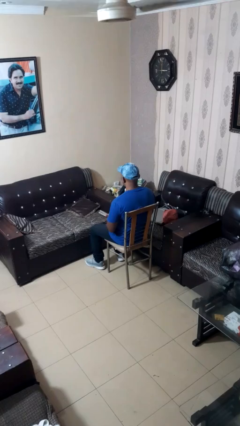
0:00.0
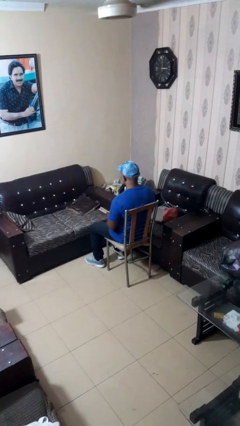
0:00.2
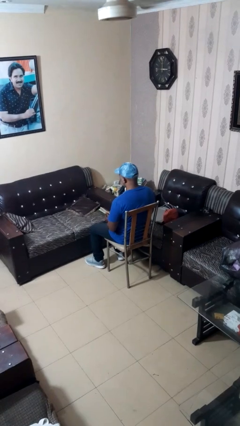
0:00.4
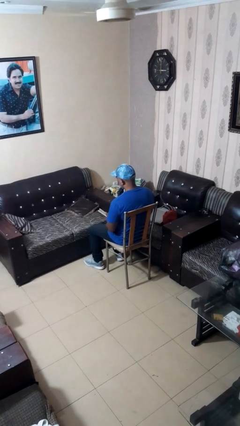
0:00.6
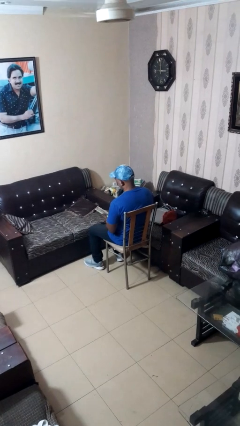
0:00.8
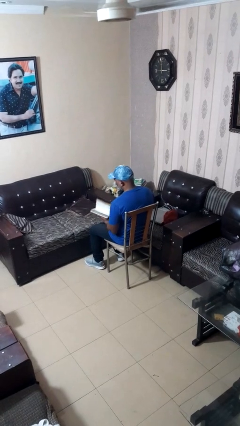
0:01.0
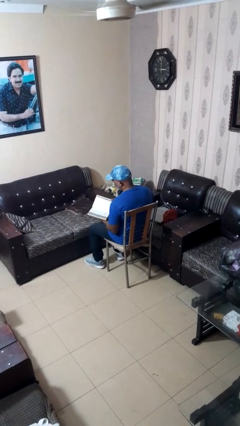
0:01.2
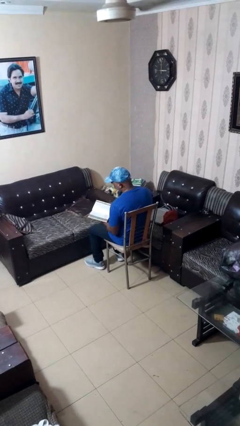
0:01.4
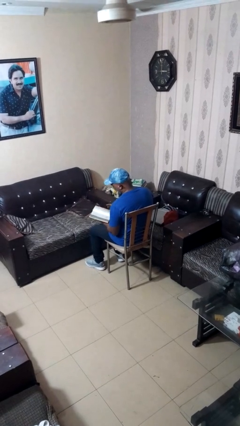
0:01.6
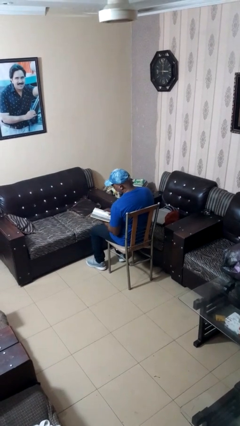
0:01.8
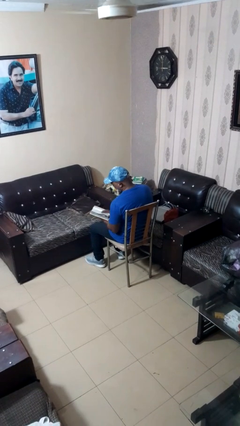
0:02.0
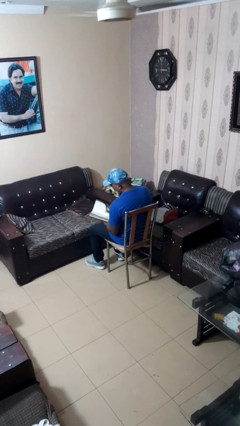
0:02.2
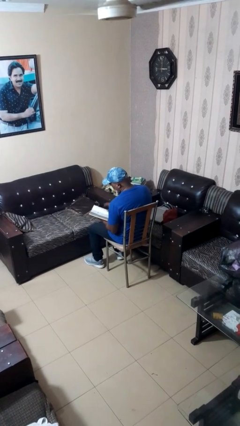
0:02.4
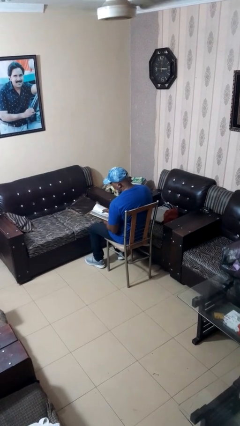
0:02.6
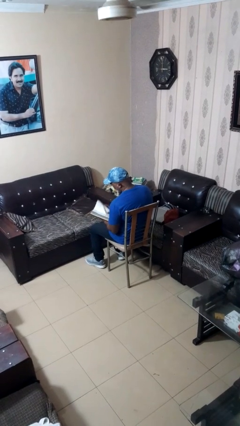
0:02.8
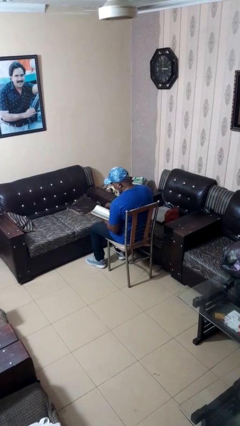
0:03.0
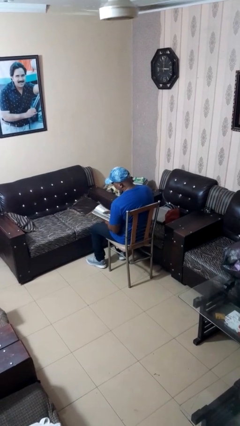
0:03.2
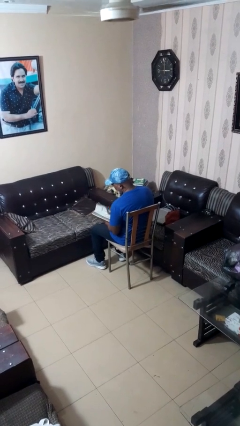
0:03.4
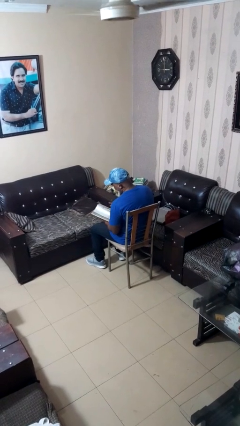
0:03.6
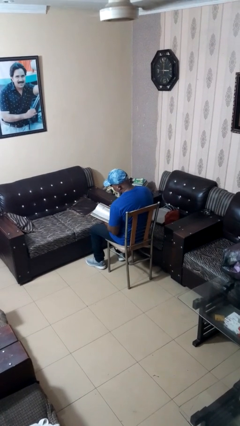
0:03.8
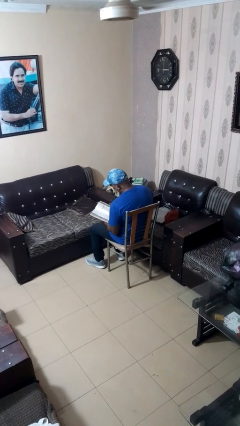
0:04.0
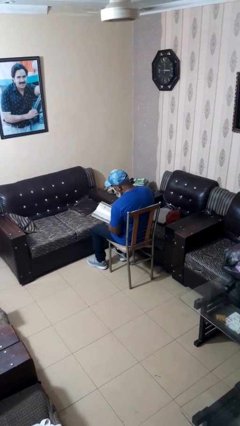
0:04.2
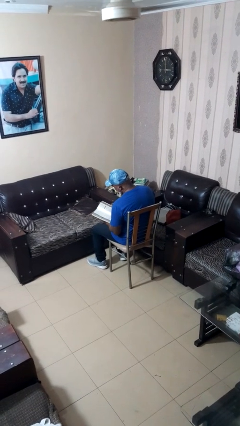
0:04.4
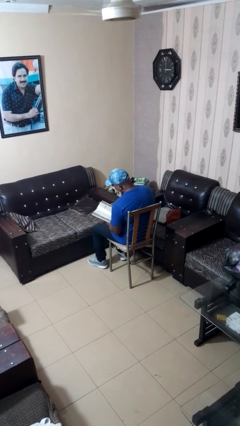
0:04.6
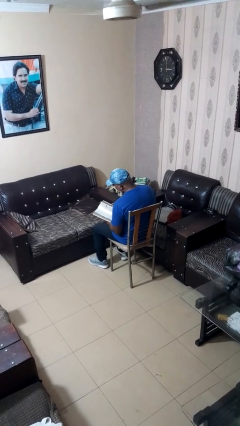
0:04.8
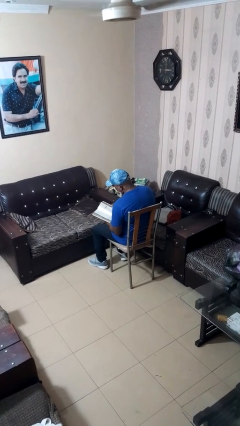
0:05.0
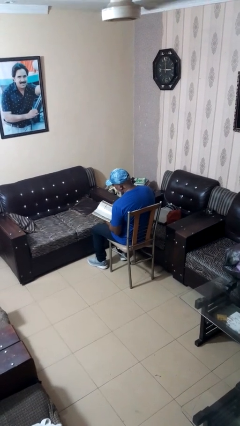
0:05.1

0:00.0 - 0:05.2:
person reads book

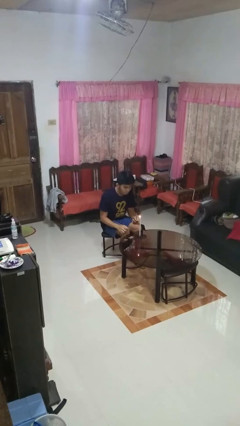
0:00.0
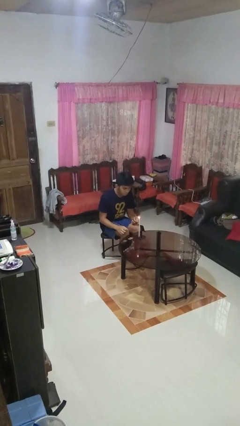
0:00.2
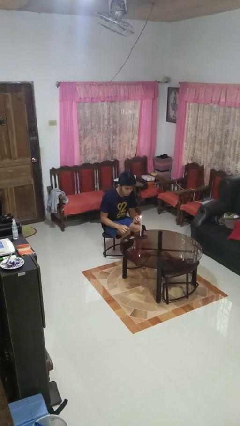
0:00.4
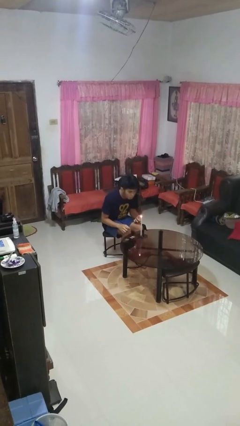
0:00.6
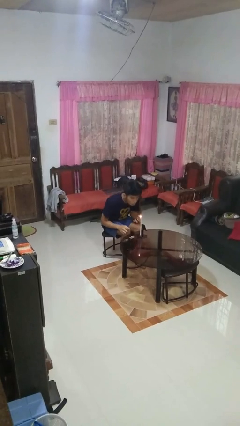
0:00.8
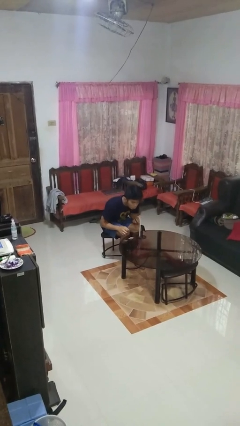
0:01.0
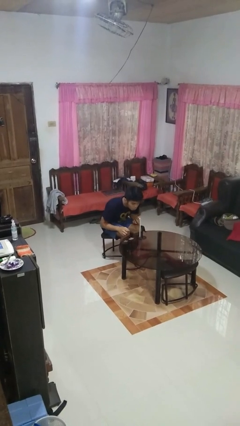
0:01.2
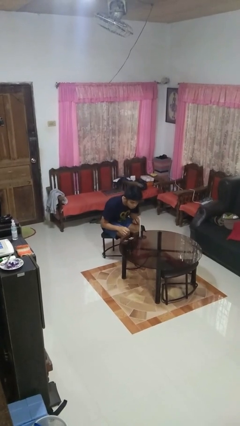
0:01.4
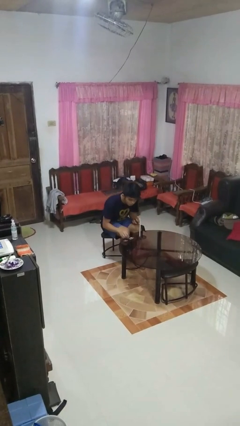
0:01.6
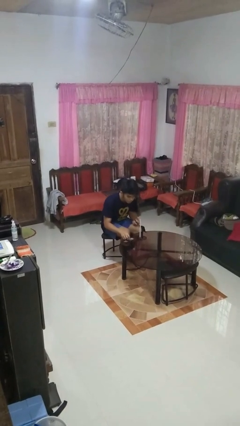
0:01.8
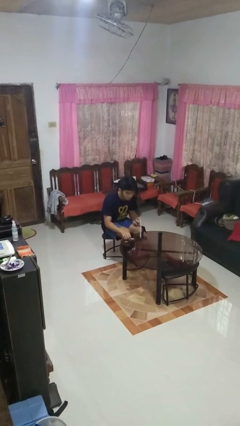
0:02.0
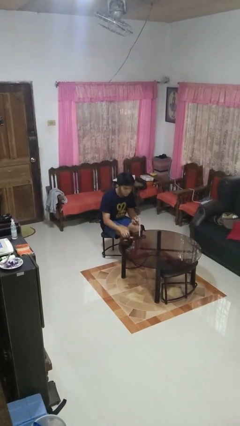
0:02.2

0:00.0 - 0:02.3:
person extinguishes candle

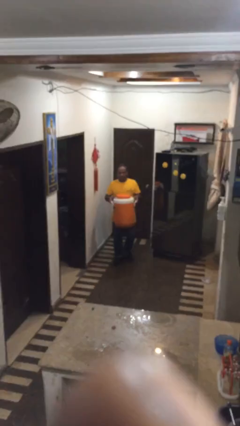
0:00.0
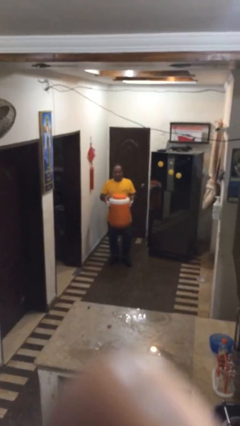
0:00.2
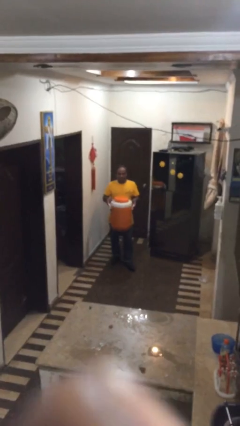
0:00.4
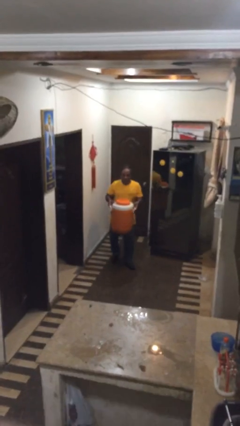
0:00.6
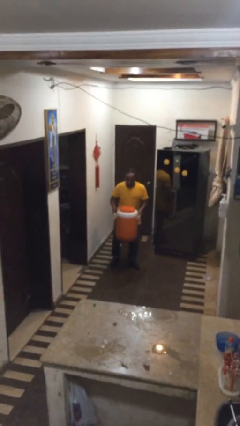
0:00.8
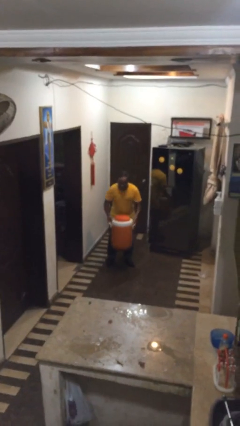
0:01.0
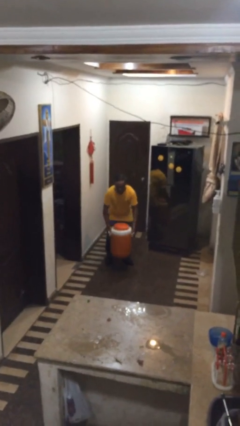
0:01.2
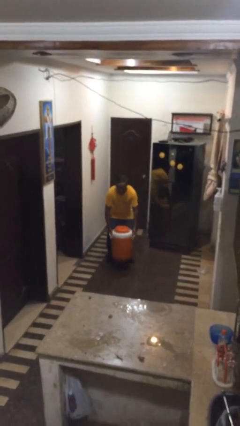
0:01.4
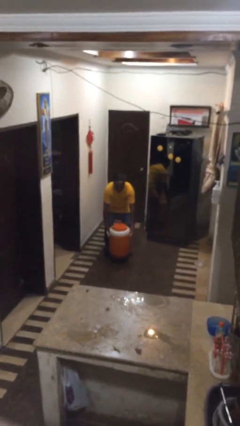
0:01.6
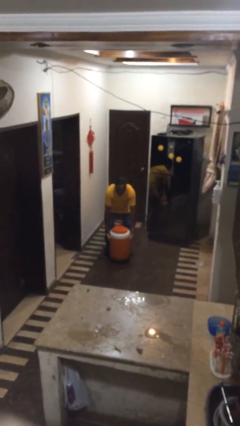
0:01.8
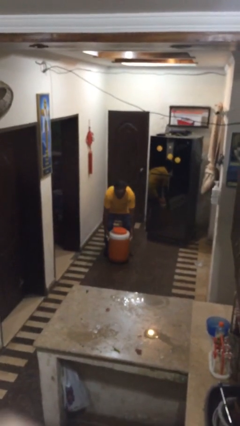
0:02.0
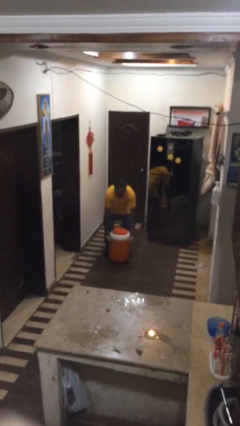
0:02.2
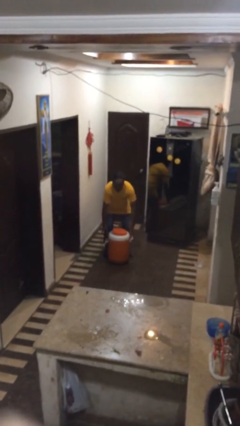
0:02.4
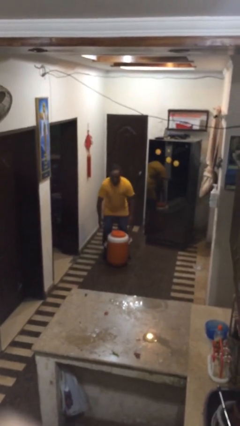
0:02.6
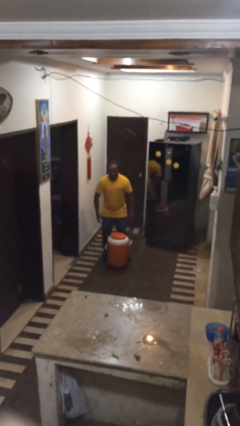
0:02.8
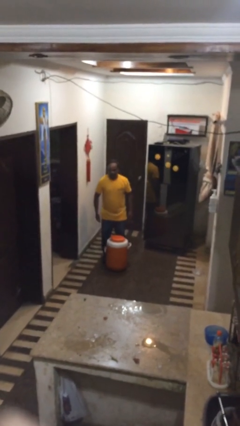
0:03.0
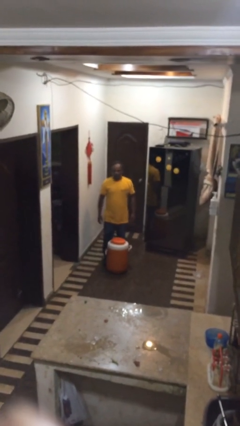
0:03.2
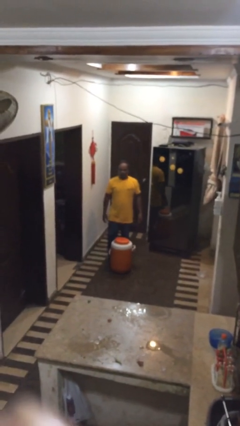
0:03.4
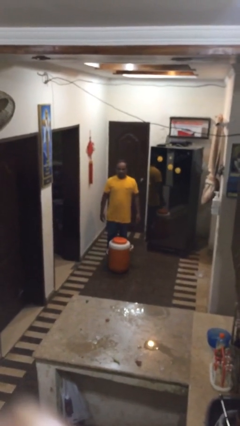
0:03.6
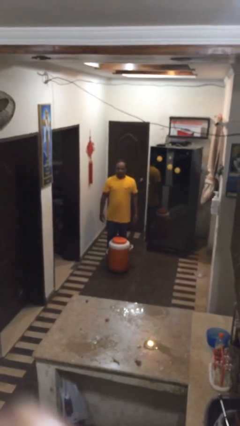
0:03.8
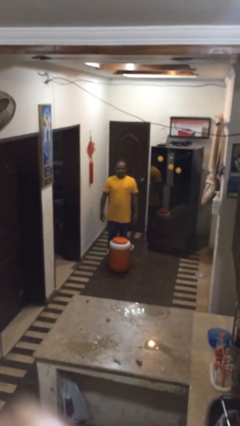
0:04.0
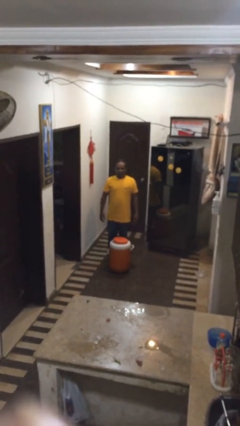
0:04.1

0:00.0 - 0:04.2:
person puts down object on floor

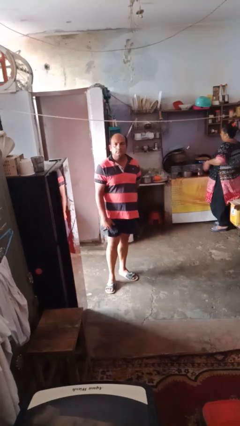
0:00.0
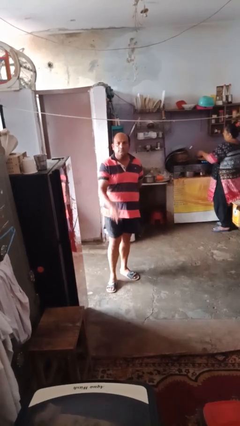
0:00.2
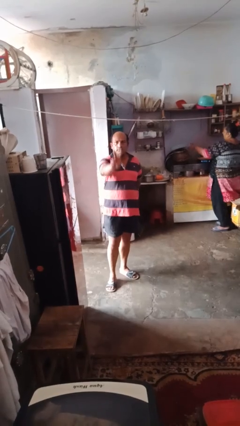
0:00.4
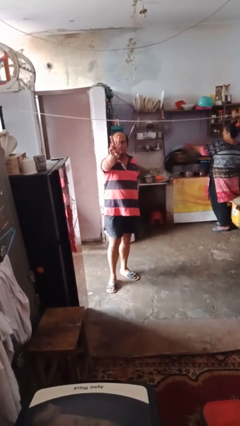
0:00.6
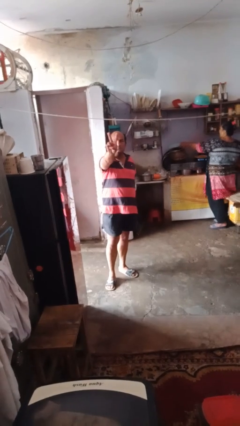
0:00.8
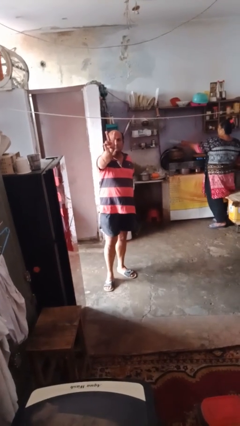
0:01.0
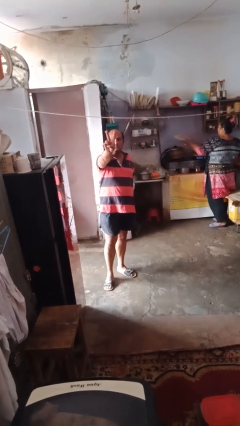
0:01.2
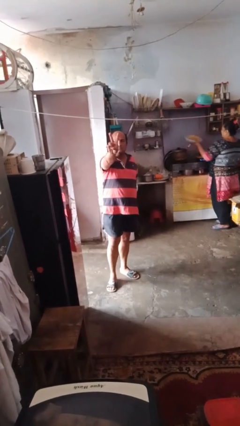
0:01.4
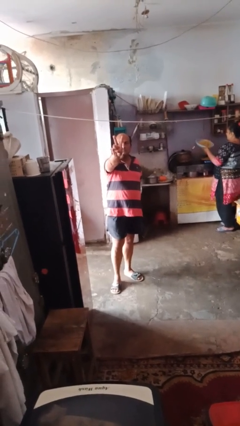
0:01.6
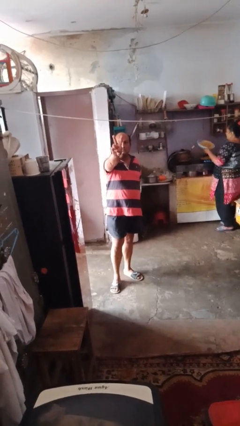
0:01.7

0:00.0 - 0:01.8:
person gestures behind me

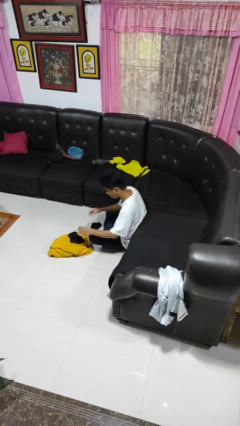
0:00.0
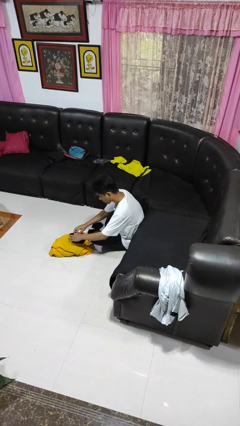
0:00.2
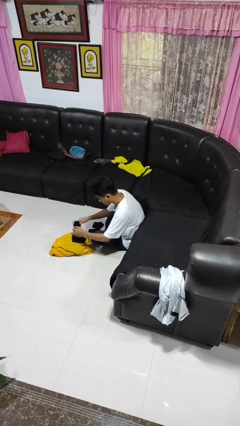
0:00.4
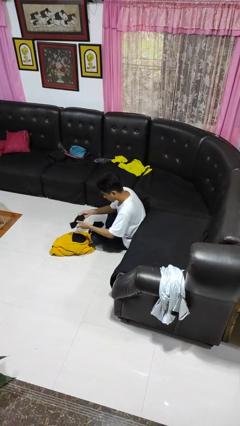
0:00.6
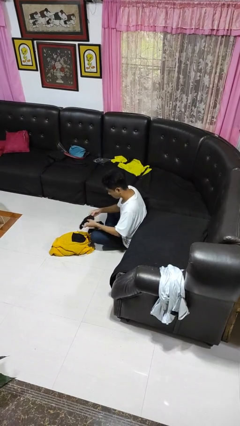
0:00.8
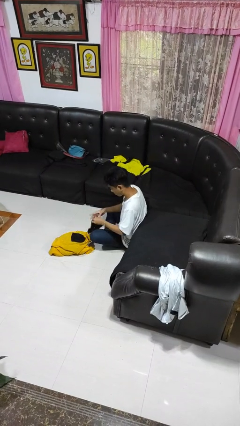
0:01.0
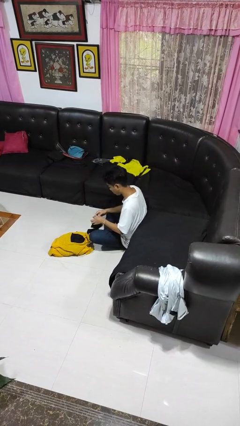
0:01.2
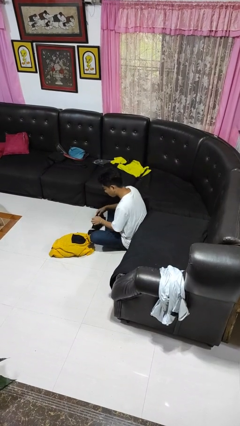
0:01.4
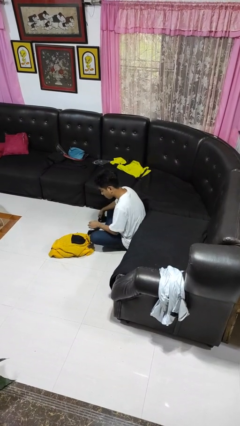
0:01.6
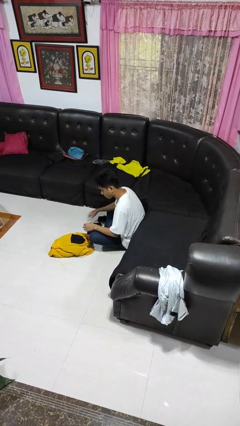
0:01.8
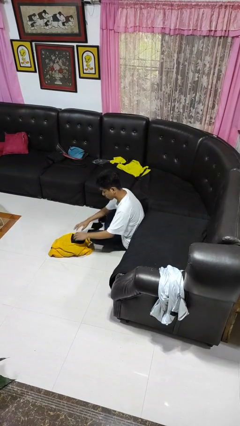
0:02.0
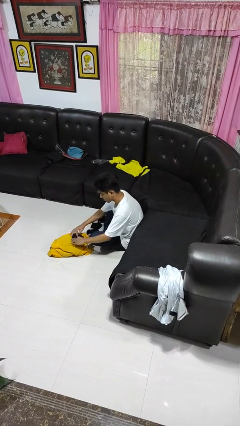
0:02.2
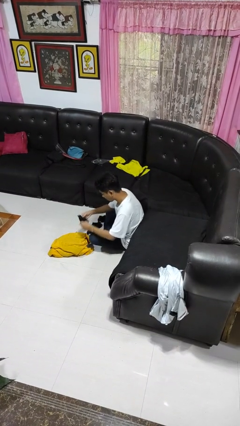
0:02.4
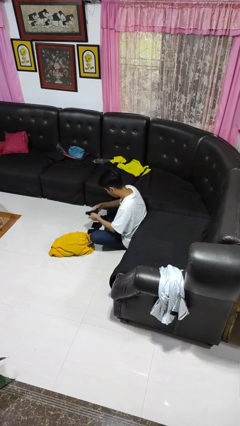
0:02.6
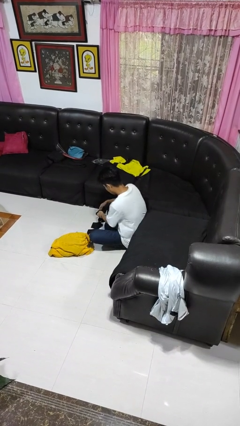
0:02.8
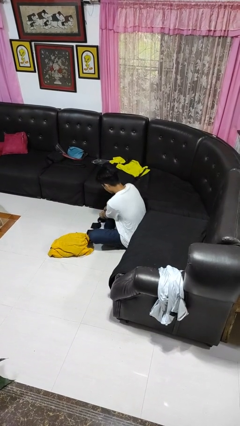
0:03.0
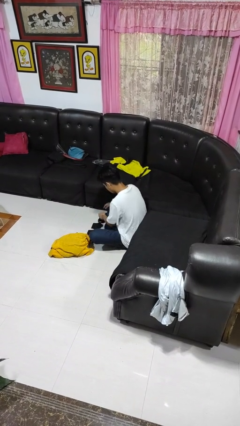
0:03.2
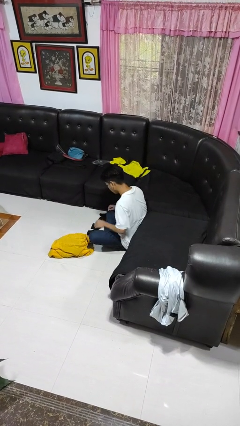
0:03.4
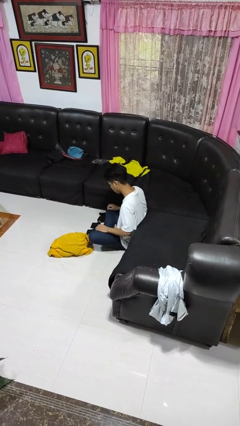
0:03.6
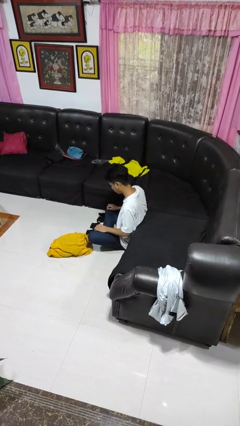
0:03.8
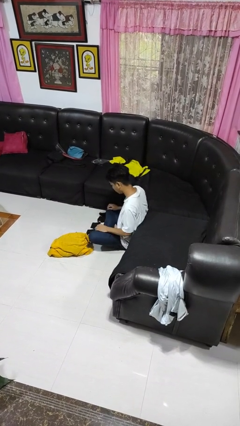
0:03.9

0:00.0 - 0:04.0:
person folds socks
